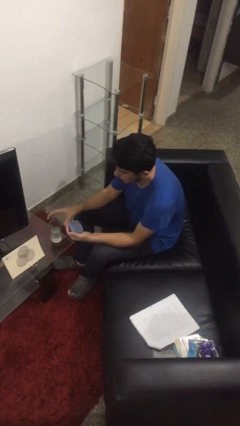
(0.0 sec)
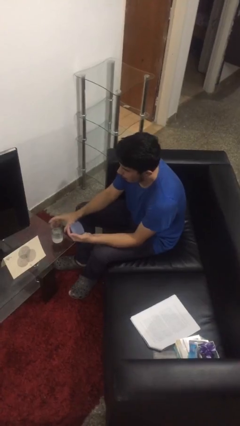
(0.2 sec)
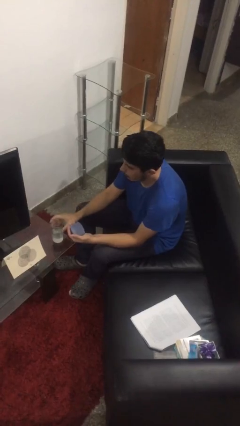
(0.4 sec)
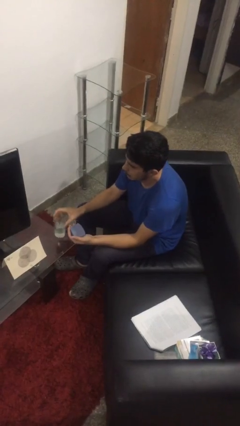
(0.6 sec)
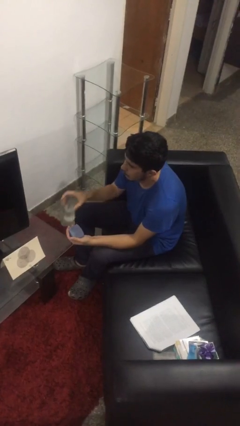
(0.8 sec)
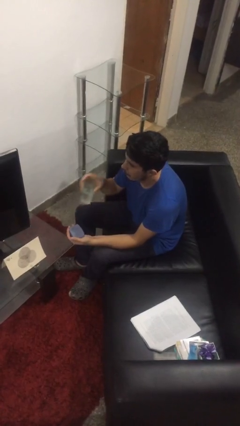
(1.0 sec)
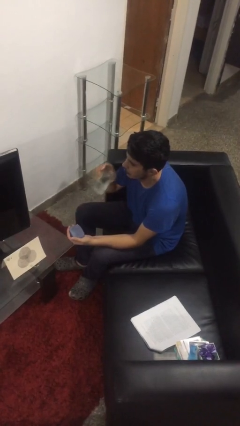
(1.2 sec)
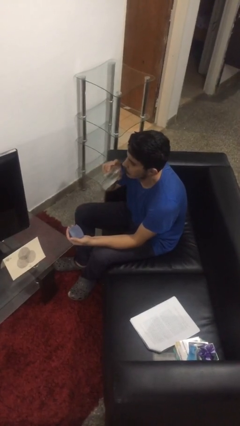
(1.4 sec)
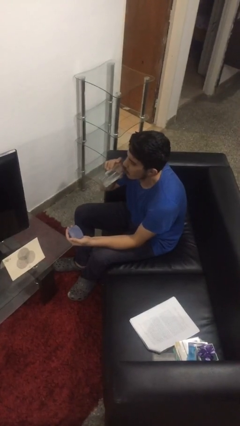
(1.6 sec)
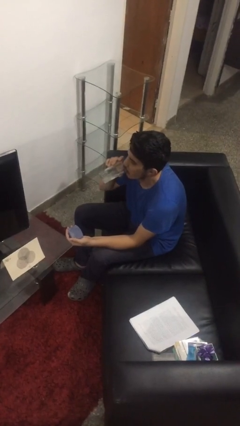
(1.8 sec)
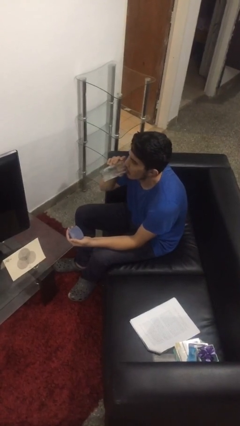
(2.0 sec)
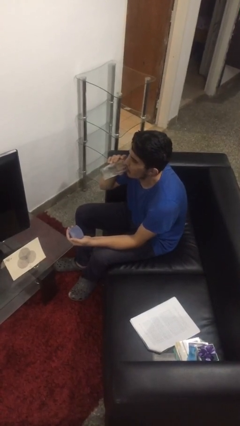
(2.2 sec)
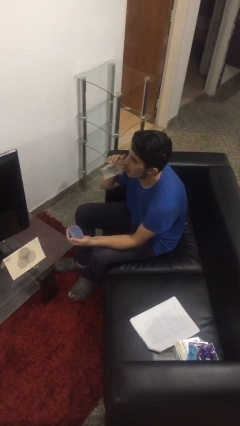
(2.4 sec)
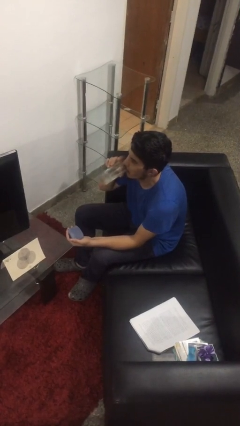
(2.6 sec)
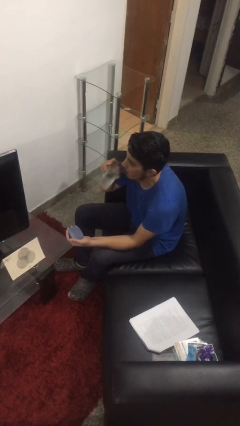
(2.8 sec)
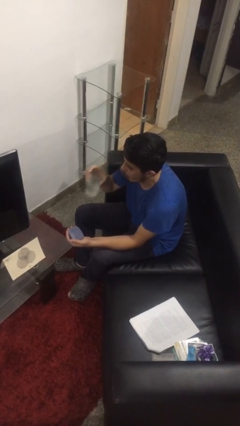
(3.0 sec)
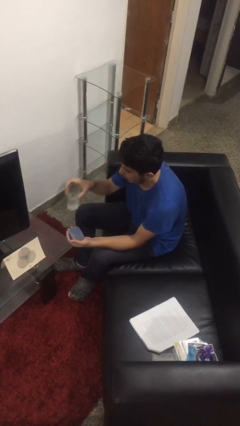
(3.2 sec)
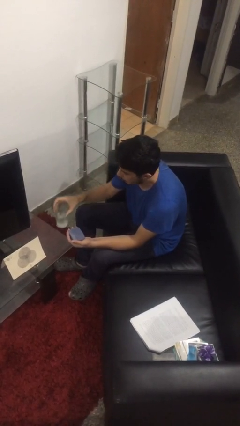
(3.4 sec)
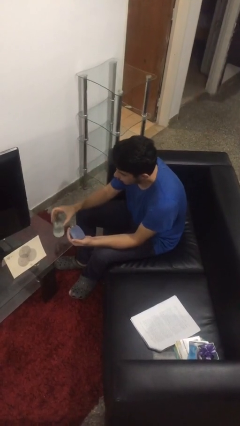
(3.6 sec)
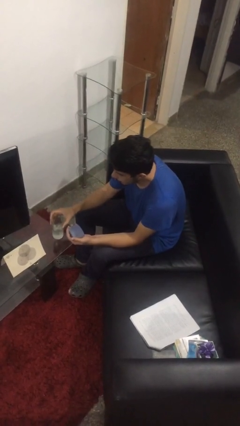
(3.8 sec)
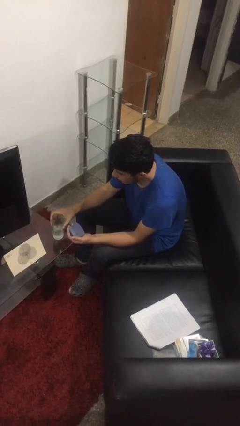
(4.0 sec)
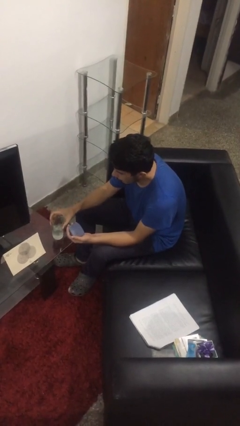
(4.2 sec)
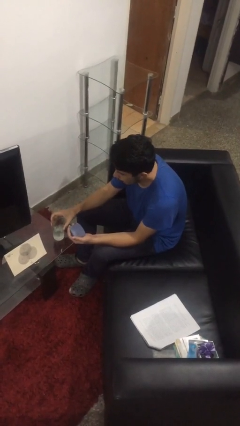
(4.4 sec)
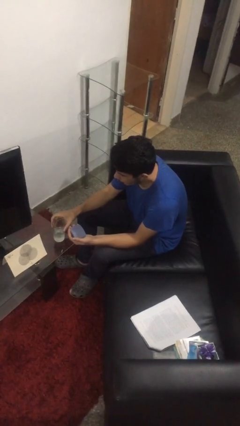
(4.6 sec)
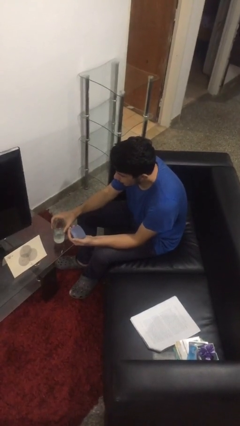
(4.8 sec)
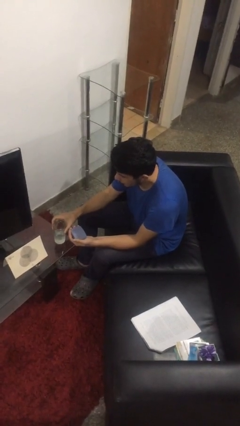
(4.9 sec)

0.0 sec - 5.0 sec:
person drinks from cup

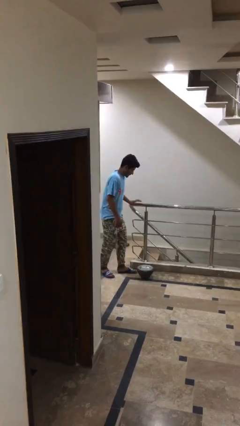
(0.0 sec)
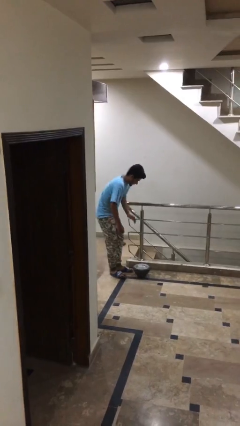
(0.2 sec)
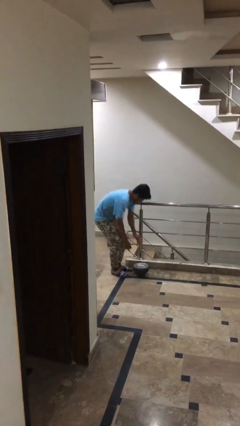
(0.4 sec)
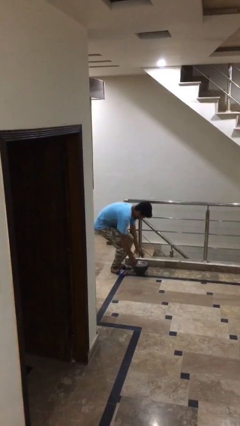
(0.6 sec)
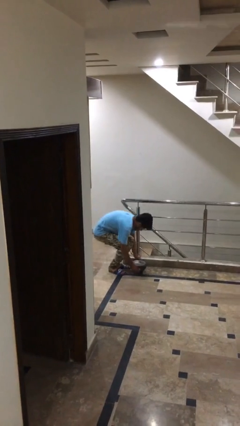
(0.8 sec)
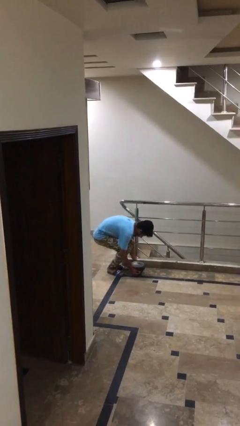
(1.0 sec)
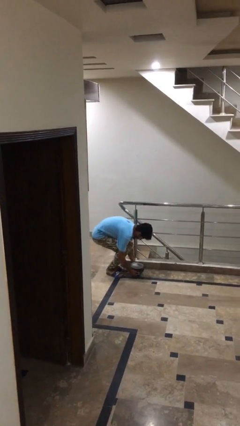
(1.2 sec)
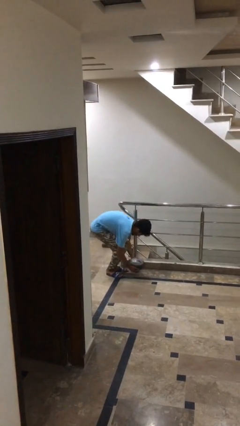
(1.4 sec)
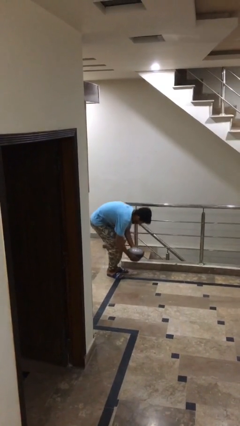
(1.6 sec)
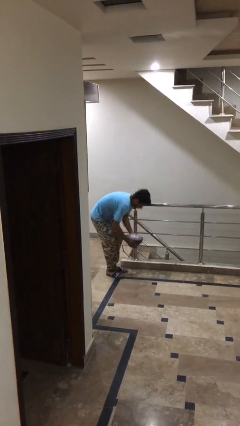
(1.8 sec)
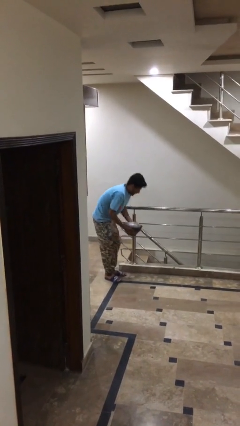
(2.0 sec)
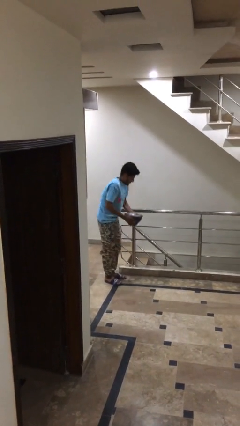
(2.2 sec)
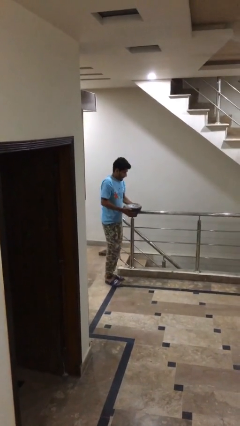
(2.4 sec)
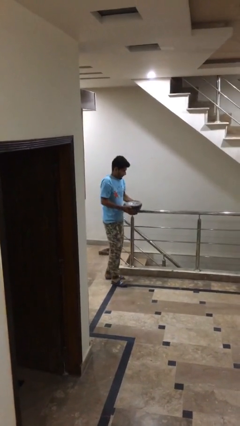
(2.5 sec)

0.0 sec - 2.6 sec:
person picks up object from floor

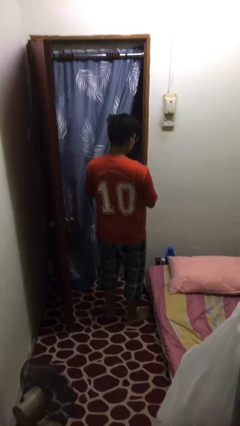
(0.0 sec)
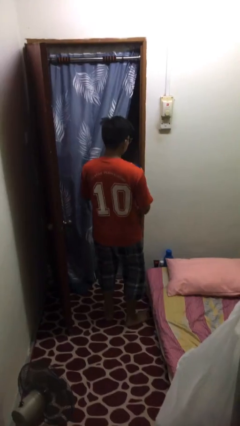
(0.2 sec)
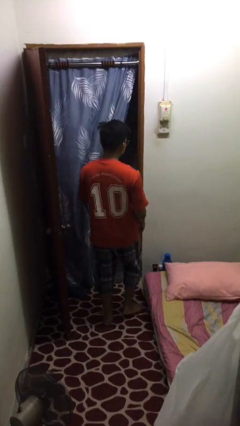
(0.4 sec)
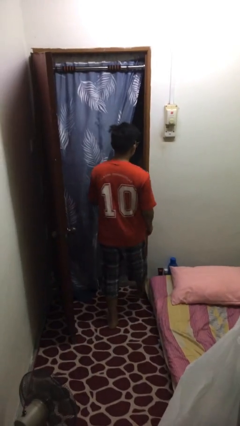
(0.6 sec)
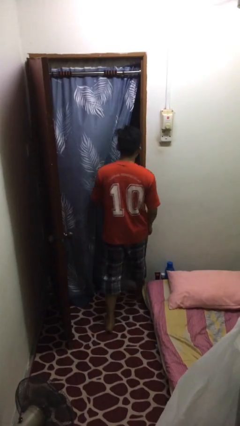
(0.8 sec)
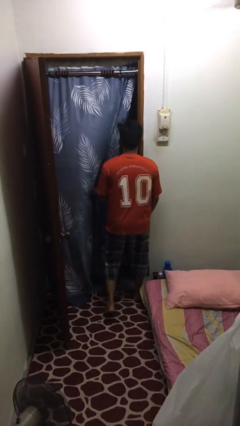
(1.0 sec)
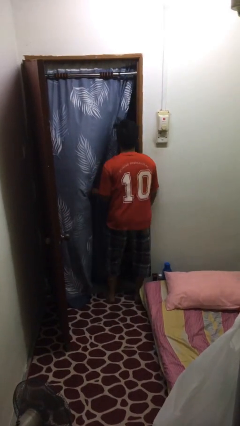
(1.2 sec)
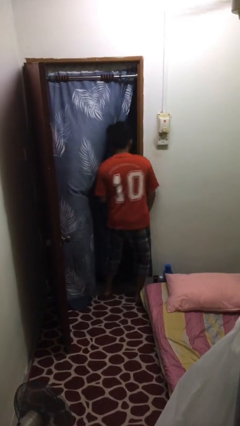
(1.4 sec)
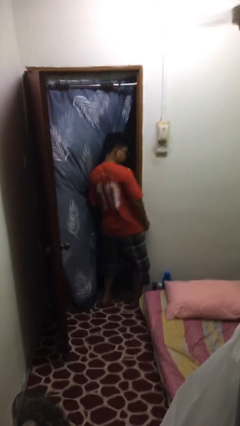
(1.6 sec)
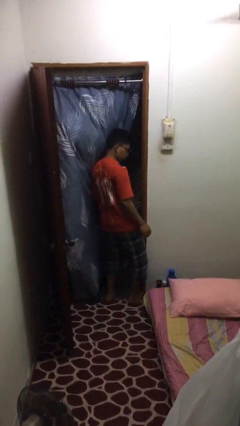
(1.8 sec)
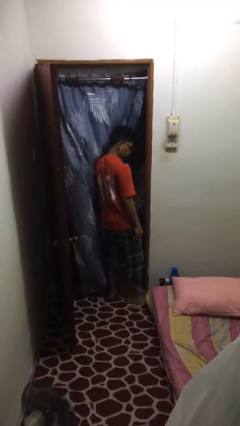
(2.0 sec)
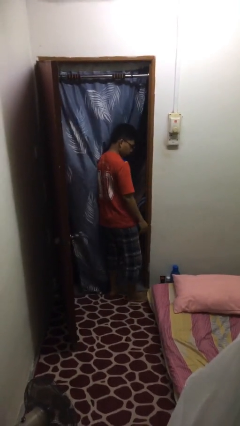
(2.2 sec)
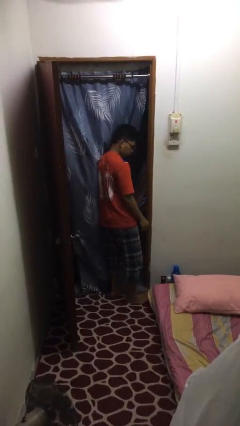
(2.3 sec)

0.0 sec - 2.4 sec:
person bumps into wall

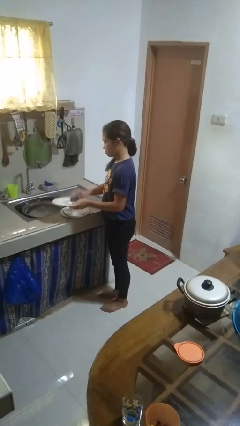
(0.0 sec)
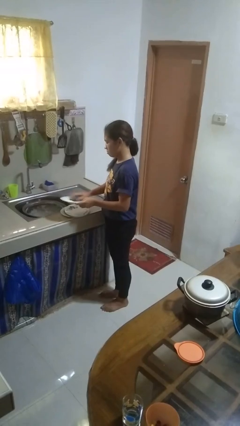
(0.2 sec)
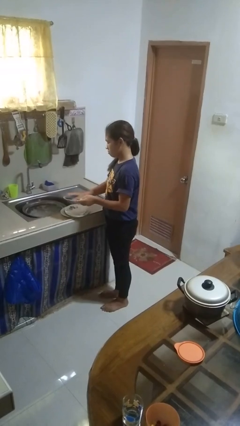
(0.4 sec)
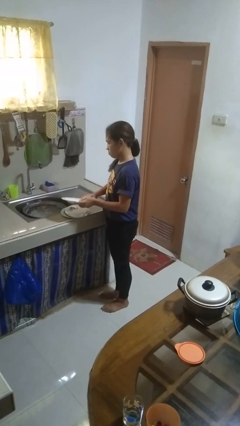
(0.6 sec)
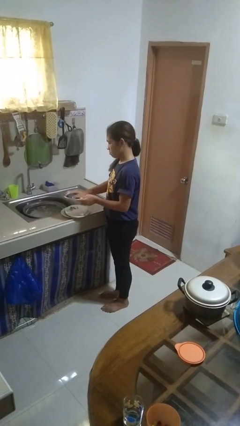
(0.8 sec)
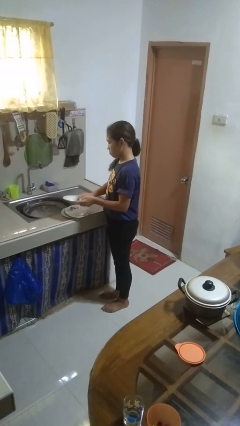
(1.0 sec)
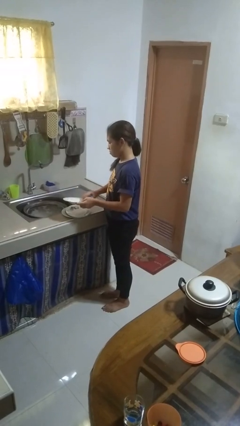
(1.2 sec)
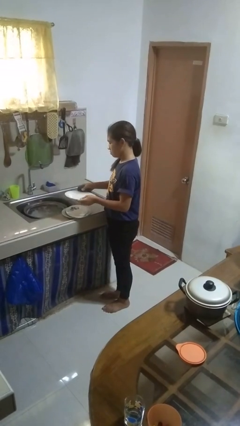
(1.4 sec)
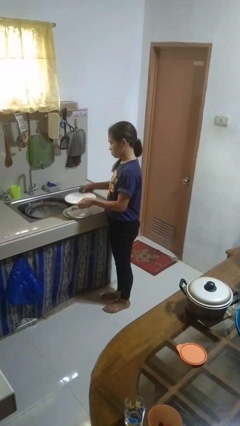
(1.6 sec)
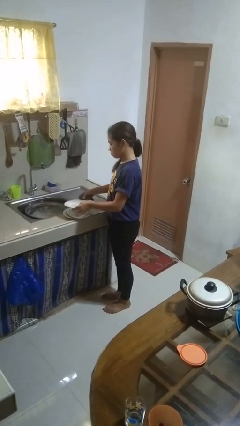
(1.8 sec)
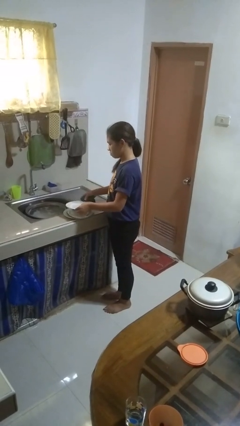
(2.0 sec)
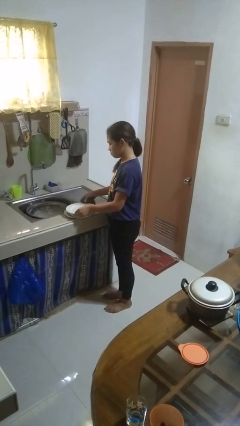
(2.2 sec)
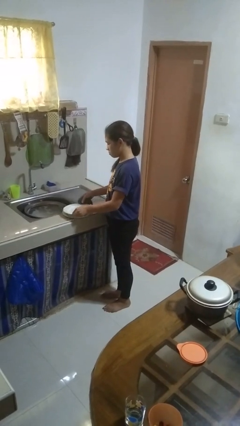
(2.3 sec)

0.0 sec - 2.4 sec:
person dries dish

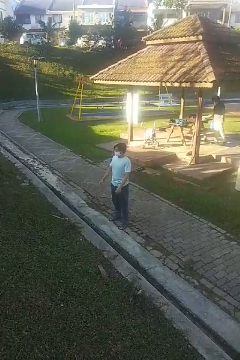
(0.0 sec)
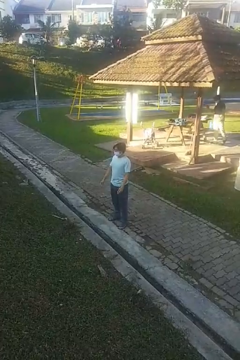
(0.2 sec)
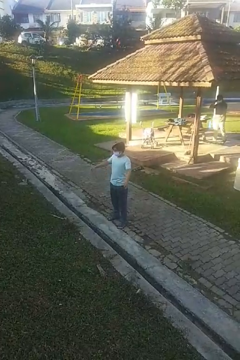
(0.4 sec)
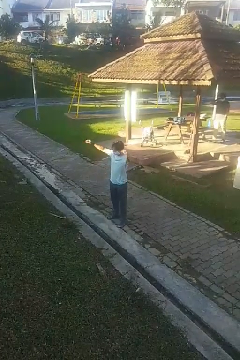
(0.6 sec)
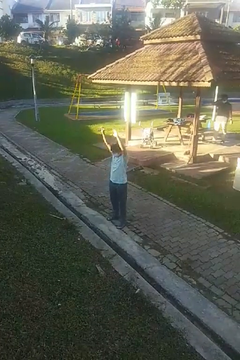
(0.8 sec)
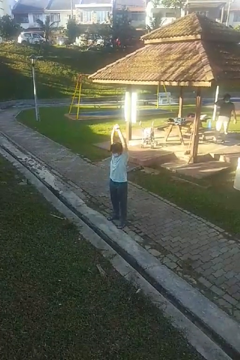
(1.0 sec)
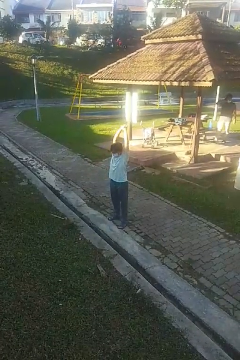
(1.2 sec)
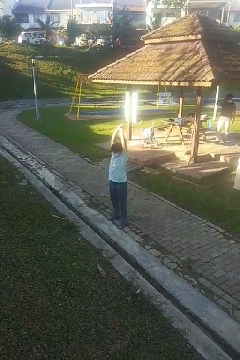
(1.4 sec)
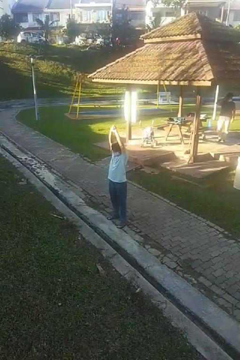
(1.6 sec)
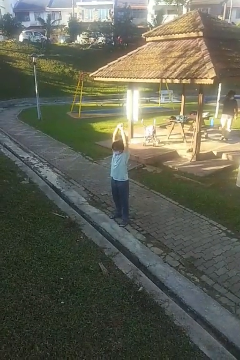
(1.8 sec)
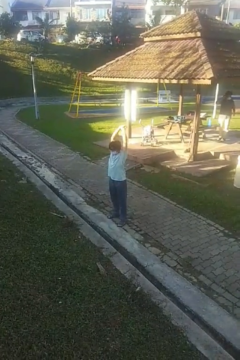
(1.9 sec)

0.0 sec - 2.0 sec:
person stretches arms over head

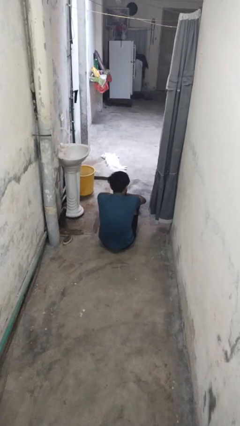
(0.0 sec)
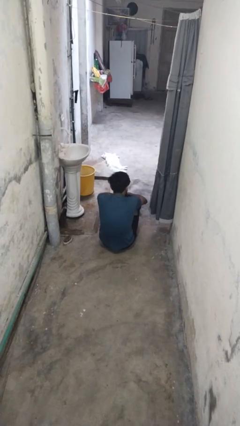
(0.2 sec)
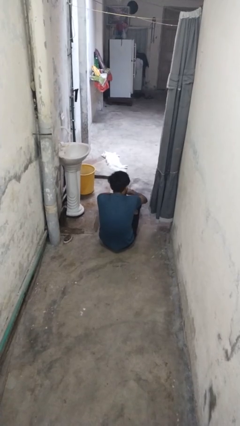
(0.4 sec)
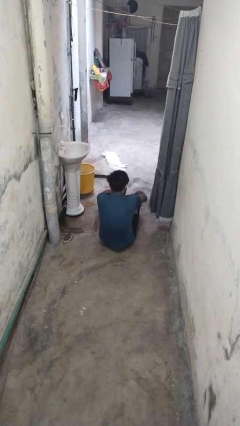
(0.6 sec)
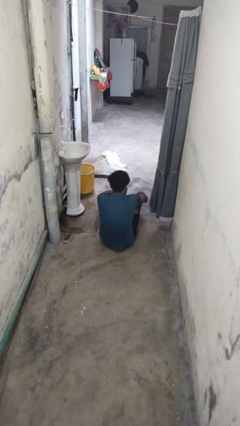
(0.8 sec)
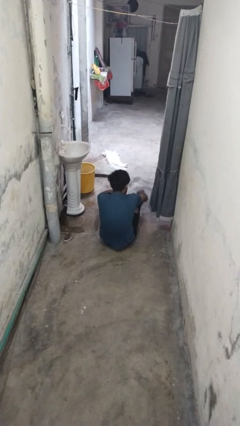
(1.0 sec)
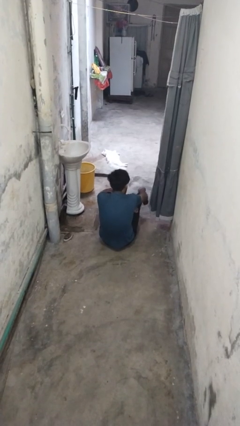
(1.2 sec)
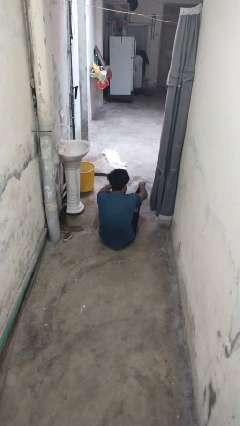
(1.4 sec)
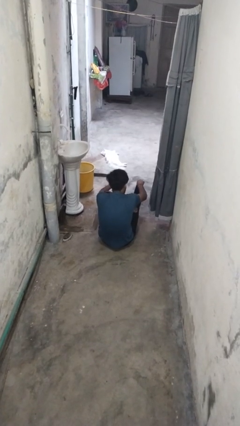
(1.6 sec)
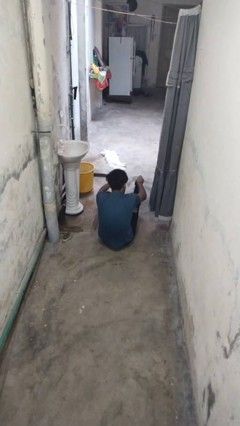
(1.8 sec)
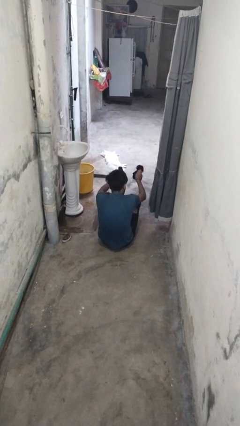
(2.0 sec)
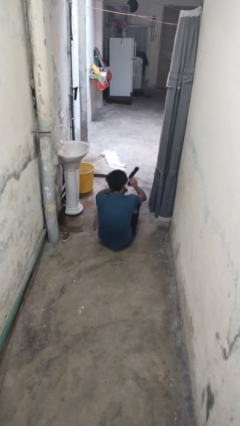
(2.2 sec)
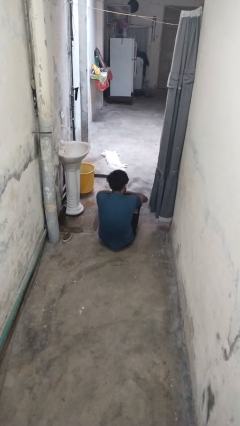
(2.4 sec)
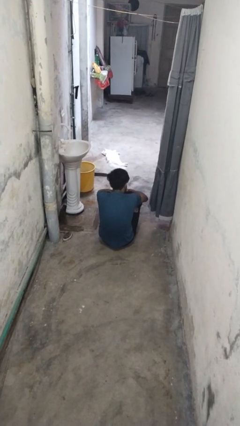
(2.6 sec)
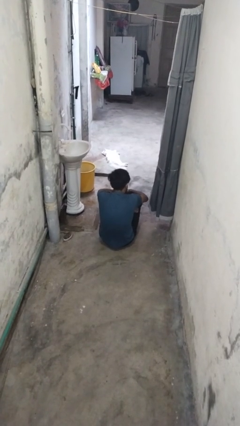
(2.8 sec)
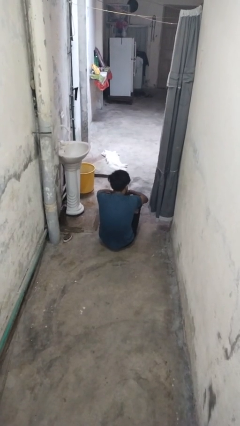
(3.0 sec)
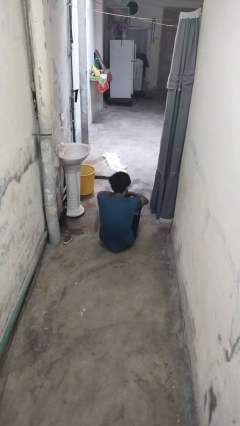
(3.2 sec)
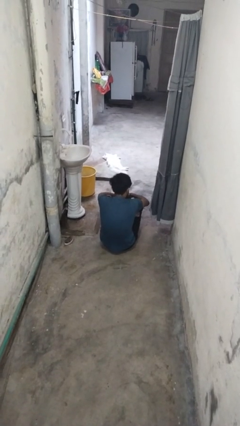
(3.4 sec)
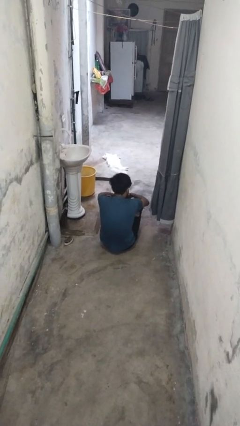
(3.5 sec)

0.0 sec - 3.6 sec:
person takes off socks
